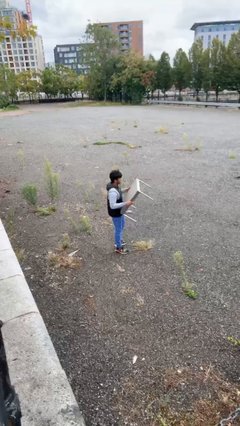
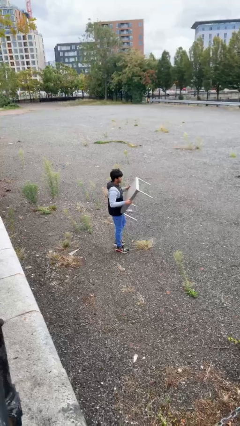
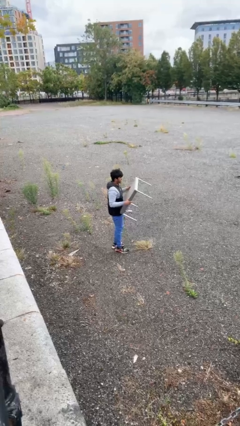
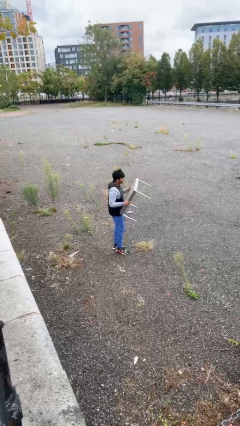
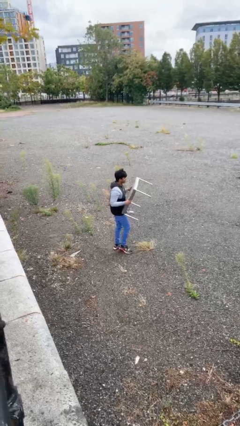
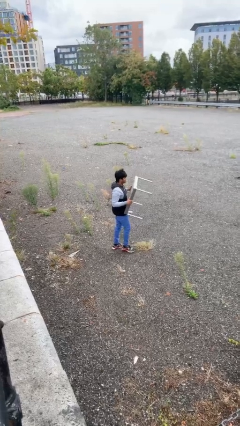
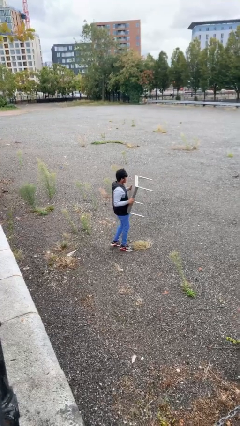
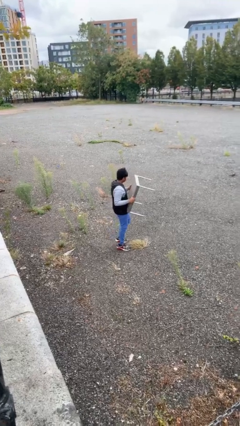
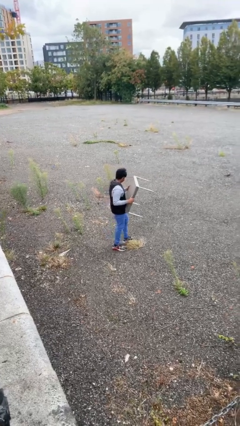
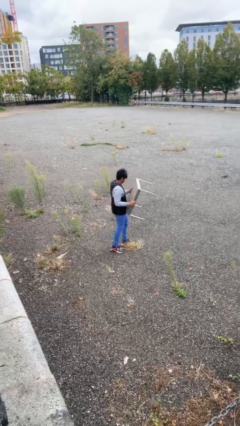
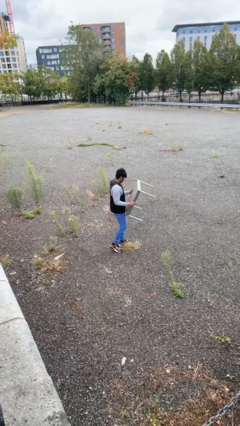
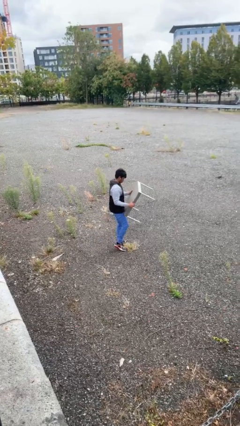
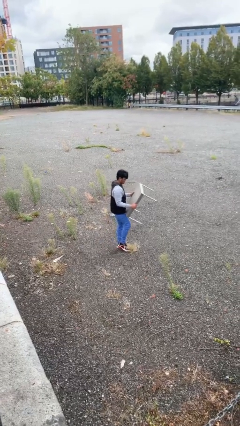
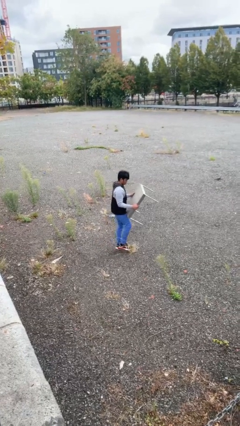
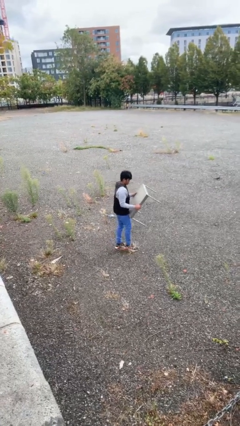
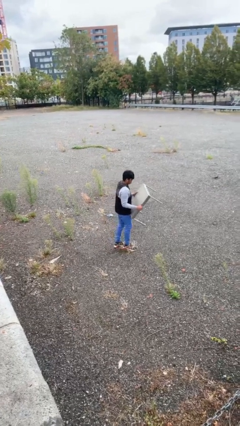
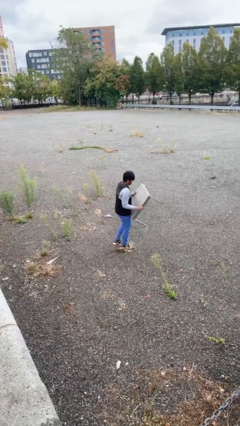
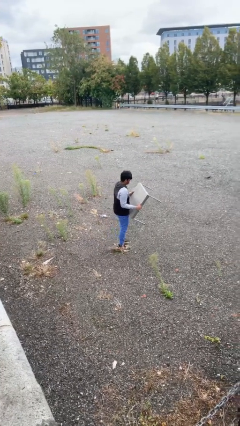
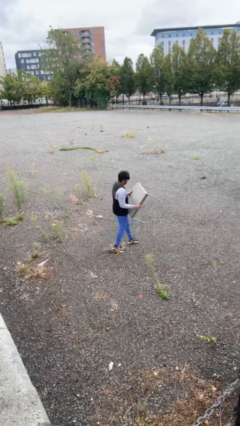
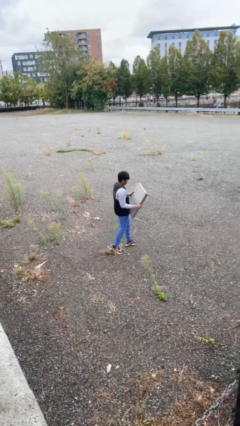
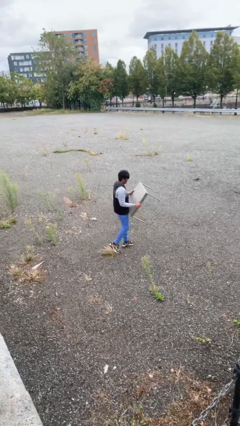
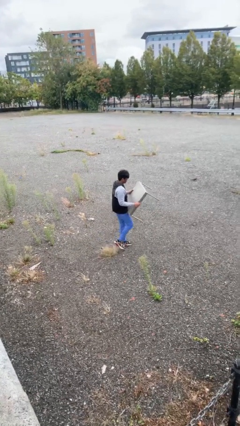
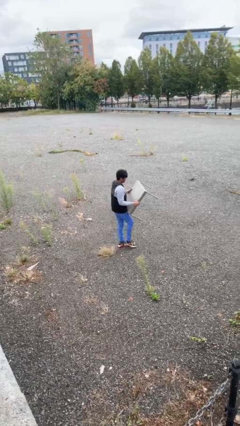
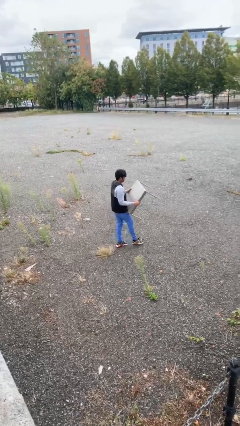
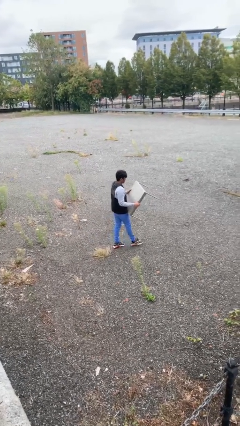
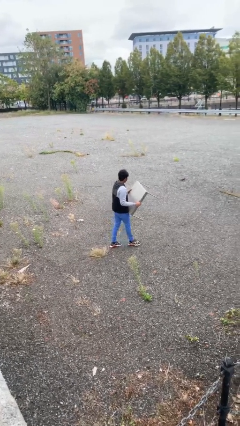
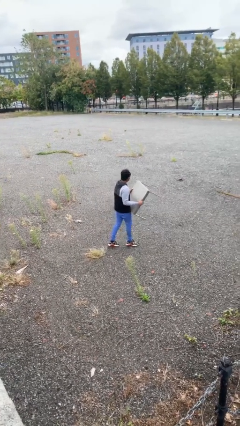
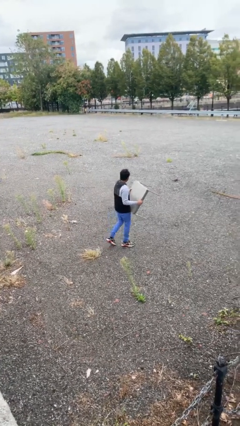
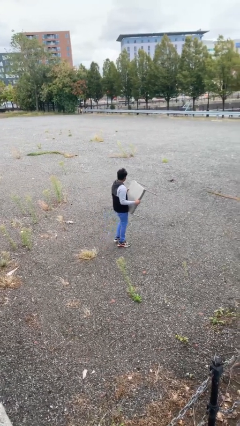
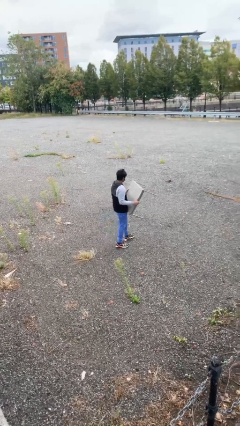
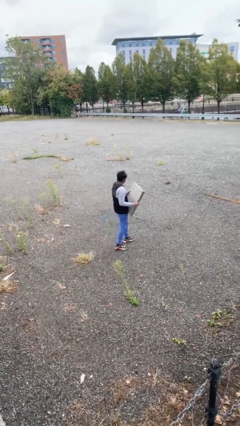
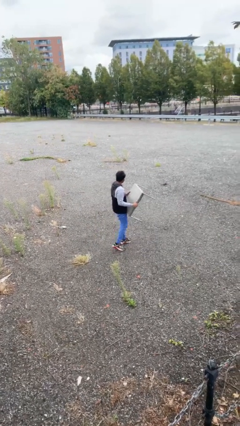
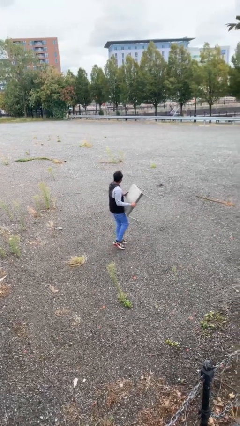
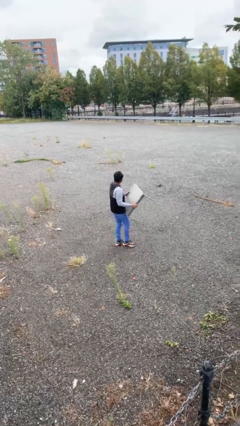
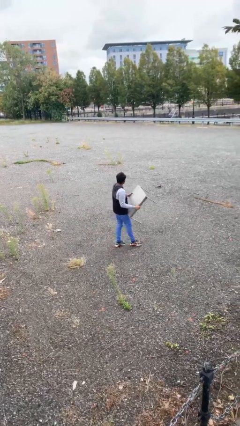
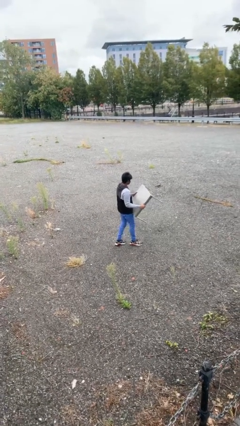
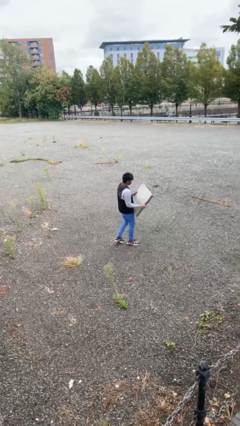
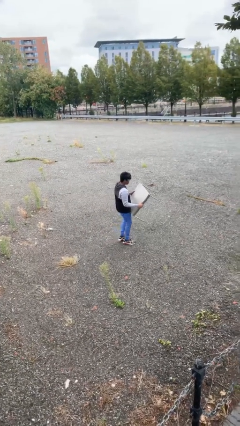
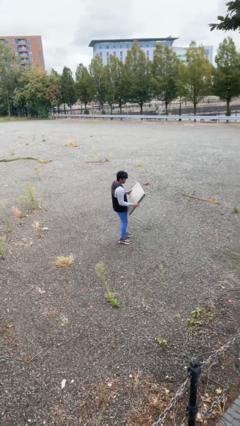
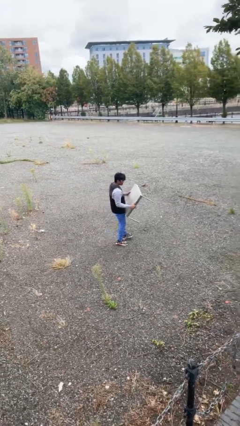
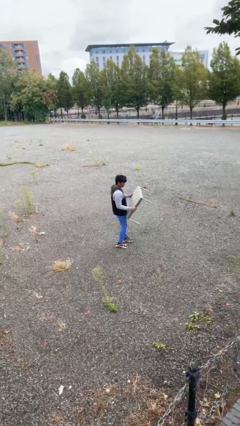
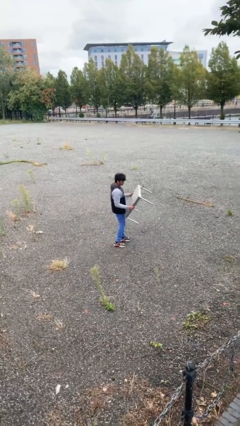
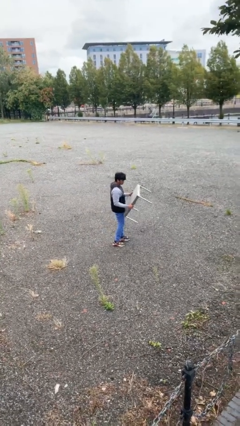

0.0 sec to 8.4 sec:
person carries heavy object

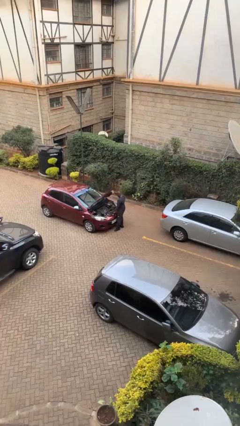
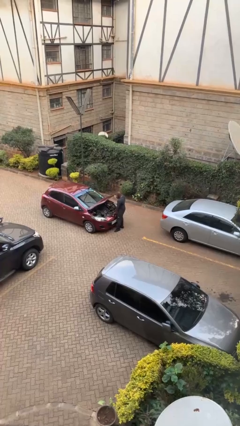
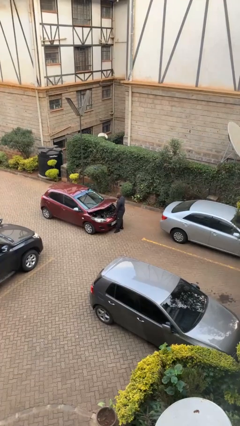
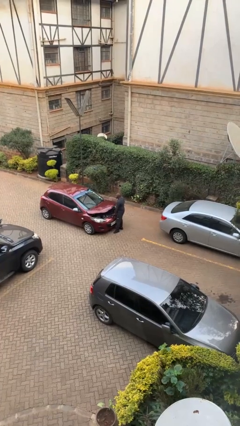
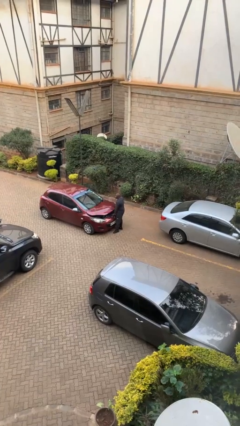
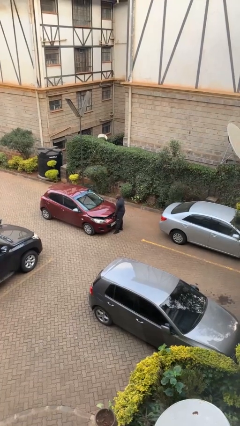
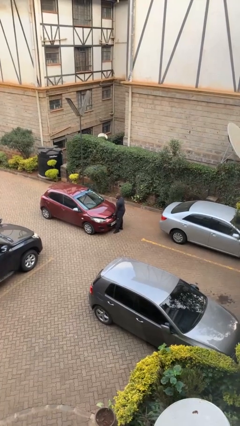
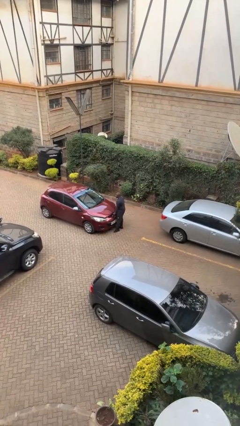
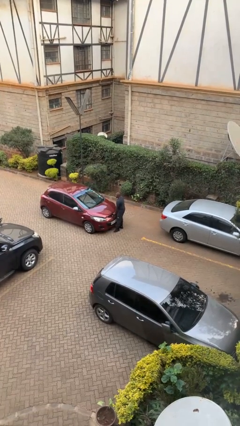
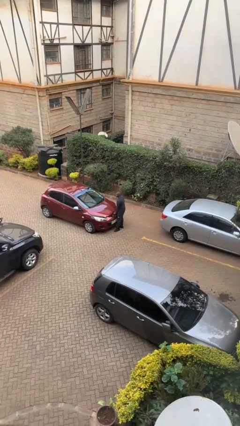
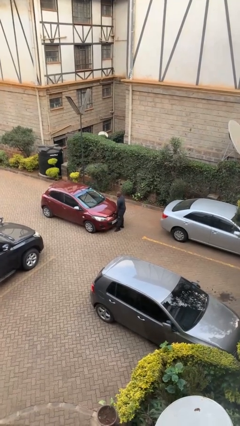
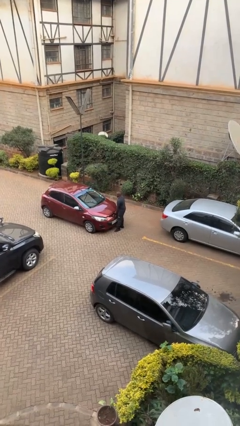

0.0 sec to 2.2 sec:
person closes car hood

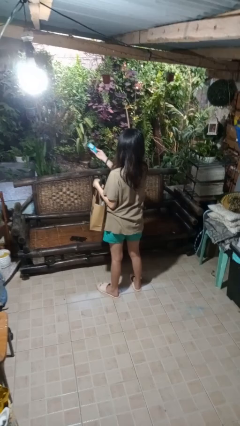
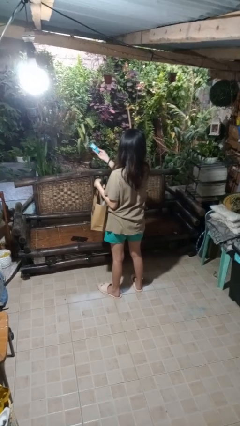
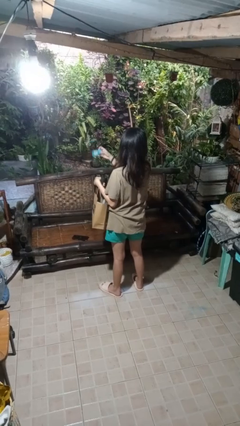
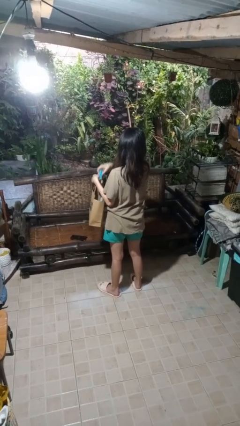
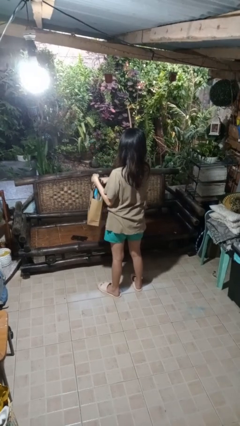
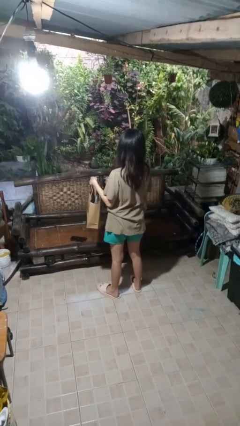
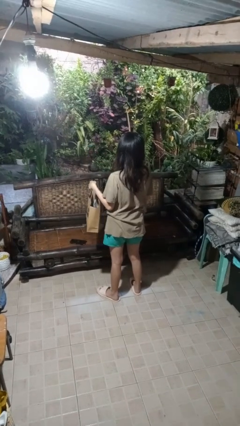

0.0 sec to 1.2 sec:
person puts object into bag

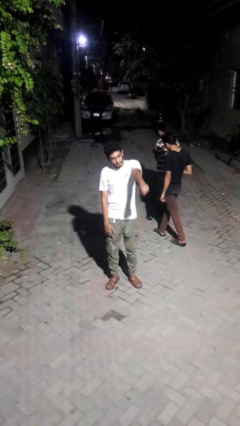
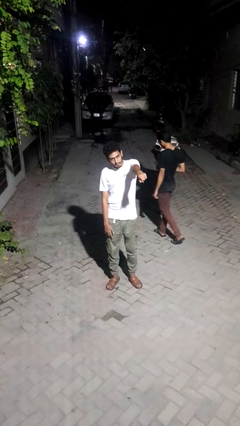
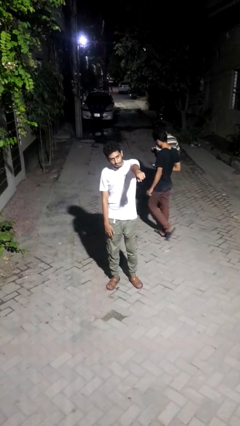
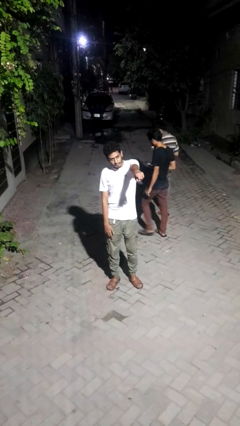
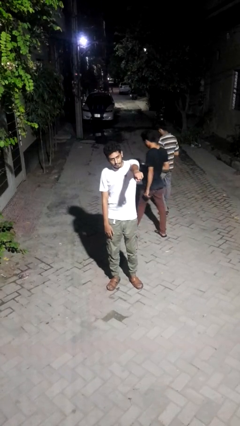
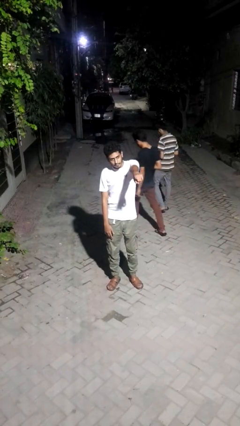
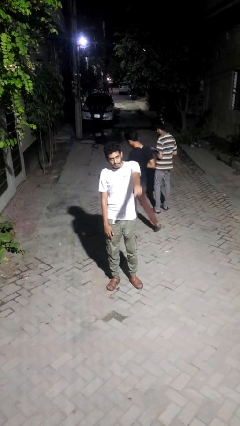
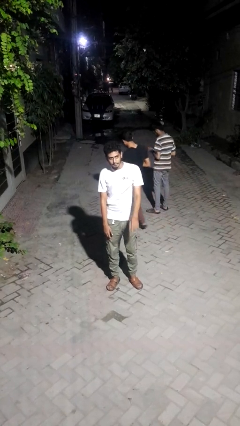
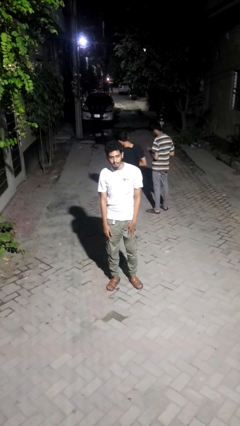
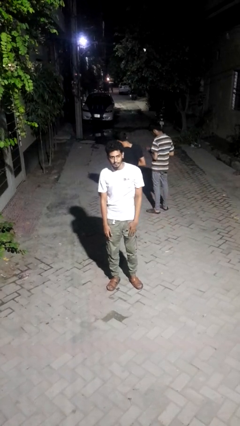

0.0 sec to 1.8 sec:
person points at person

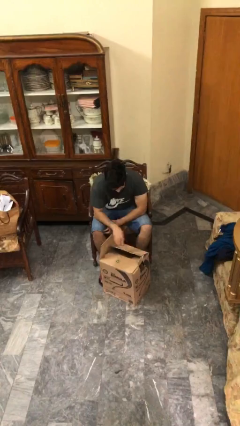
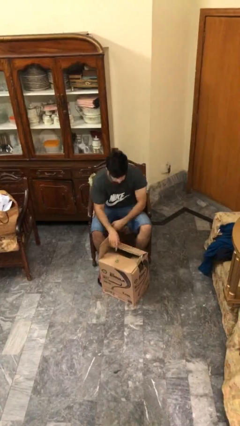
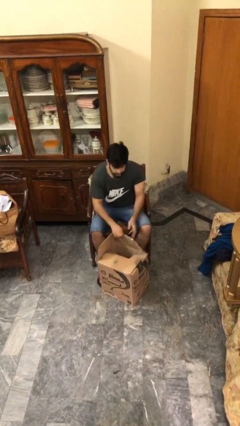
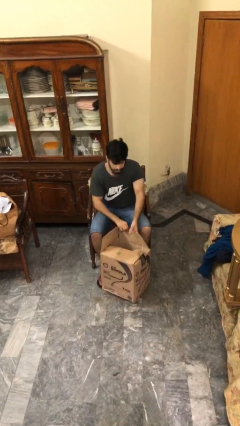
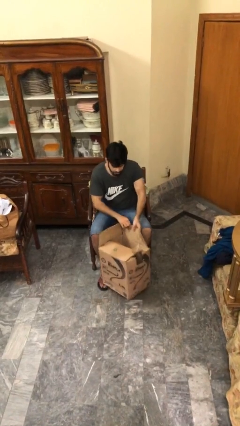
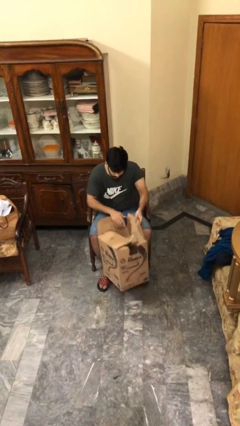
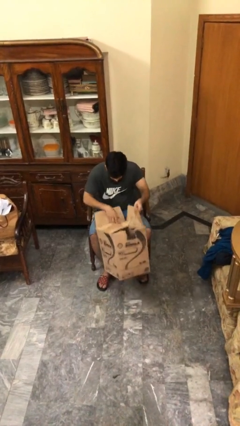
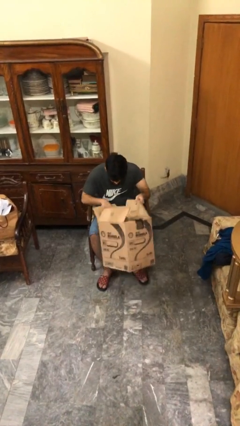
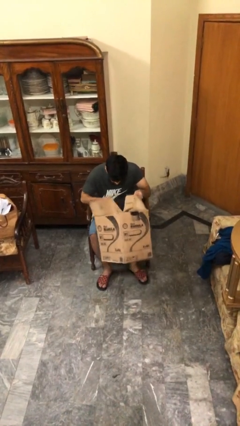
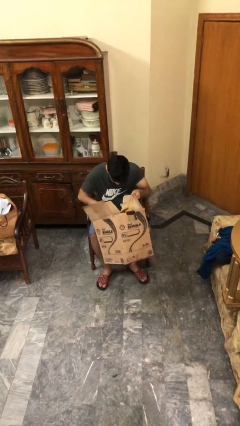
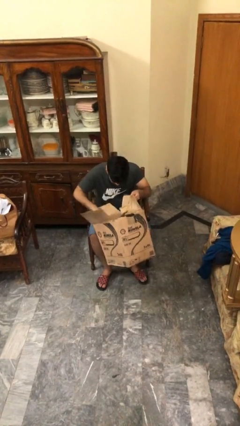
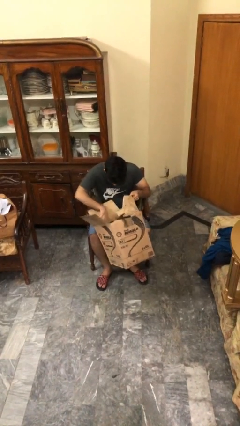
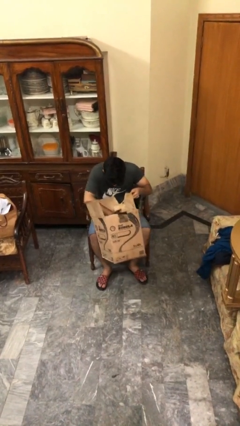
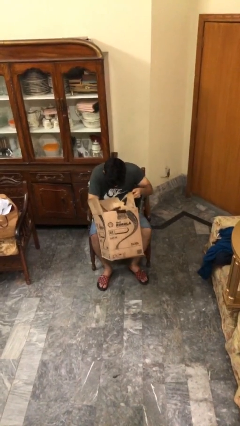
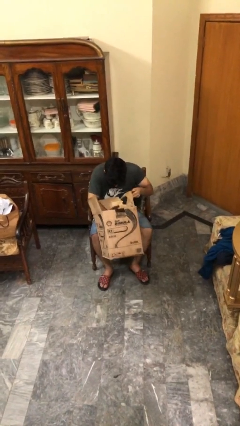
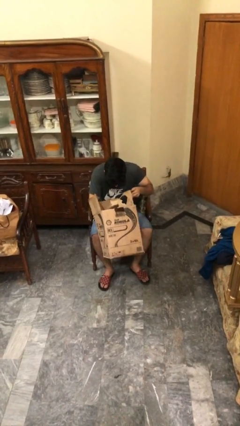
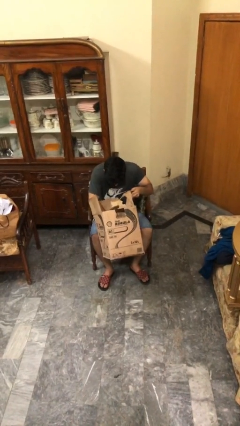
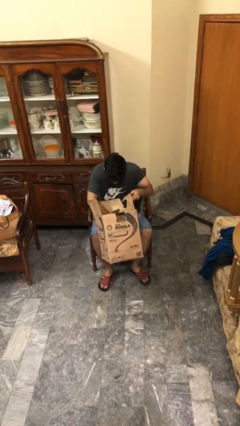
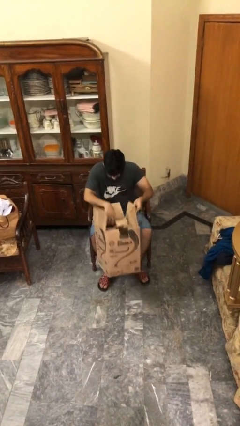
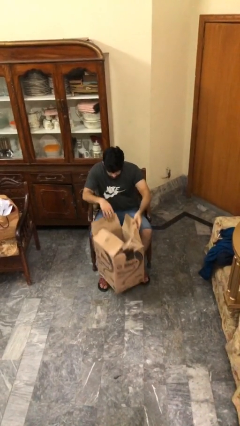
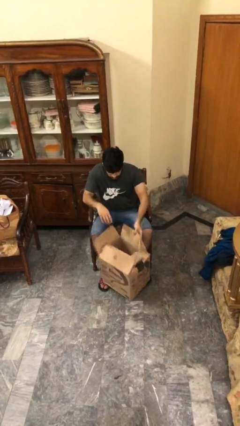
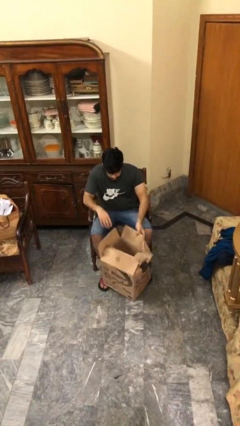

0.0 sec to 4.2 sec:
person searches in box
